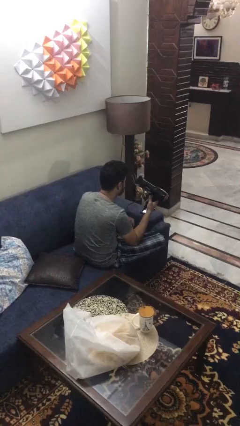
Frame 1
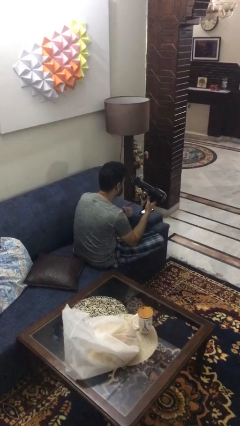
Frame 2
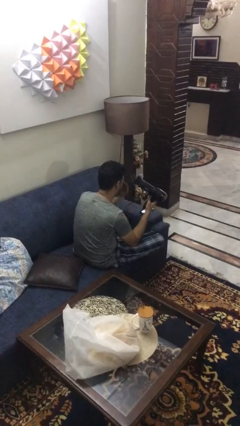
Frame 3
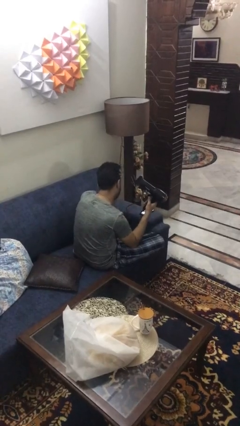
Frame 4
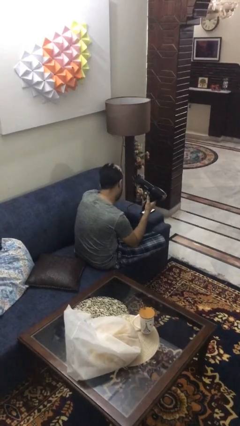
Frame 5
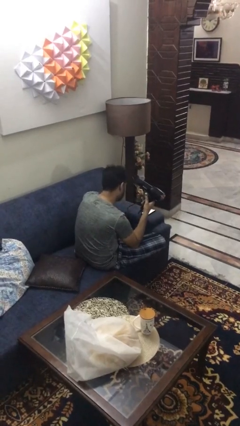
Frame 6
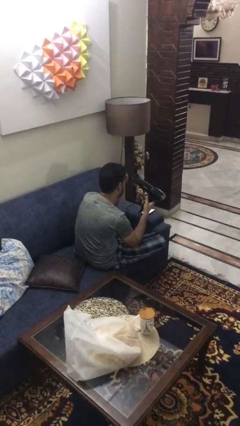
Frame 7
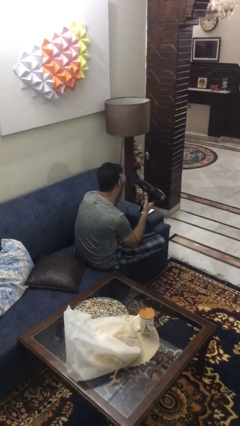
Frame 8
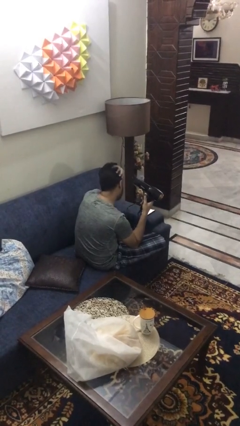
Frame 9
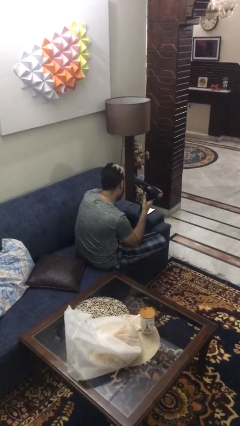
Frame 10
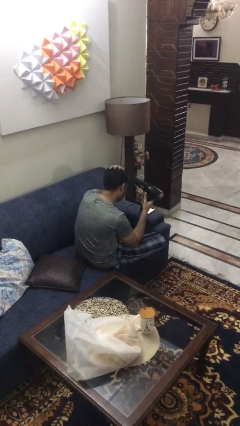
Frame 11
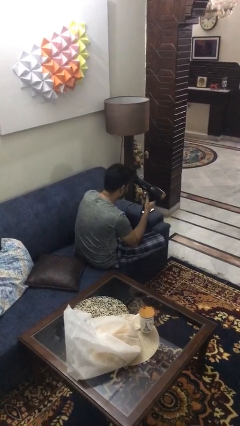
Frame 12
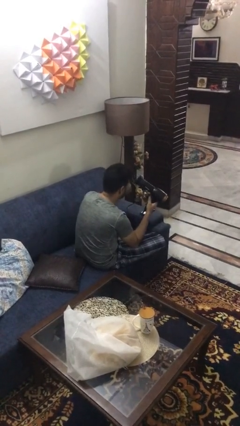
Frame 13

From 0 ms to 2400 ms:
person dries hair with hairdryer

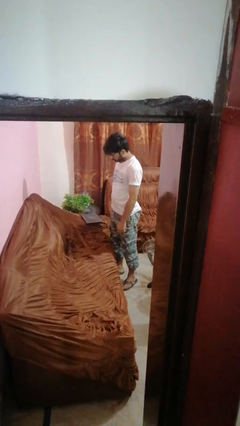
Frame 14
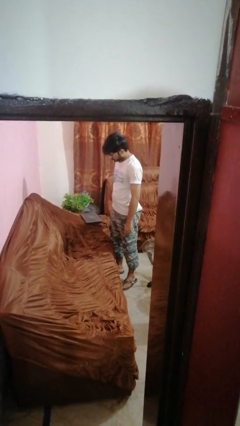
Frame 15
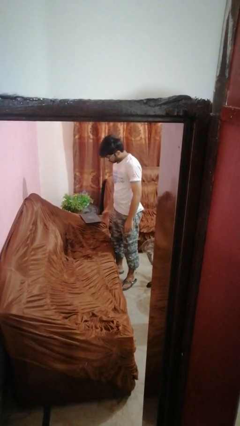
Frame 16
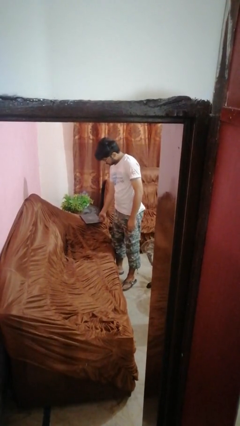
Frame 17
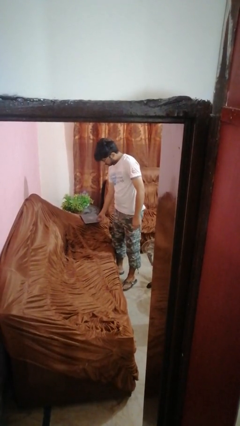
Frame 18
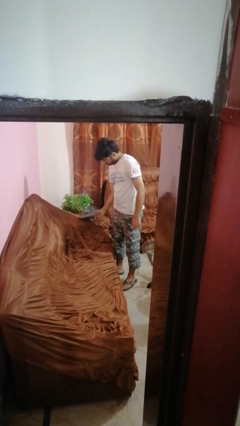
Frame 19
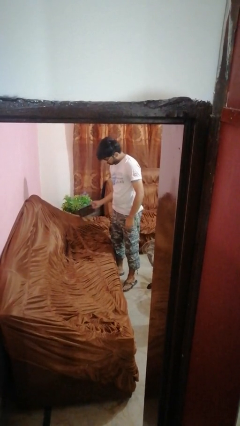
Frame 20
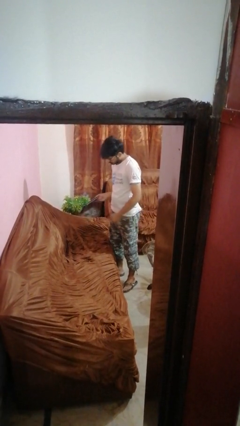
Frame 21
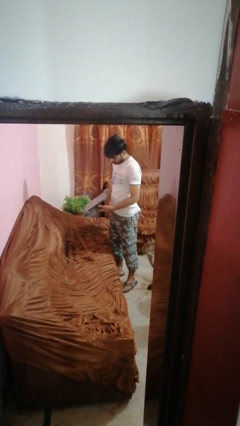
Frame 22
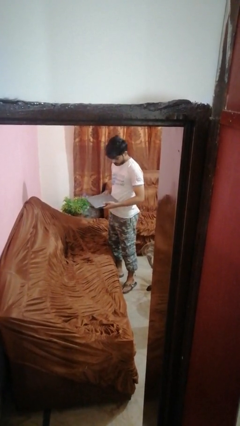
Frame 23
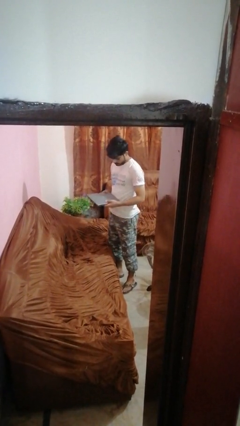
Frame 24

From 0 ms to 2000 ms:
person picks up object from couch

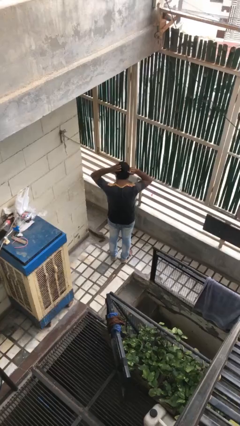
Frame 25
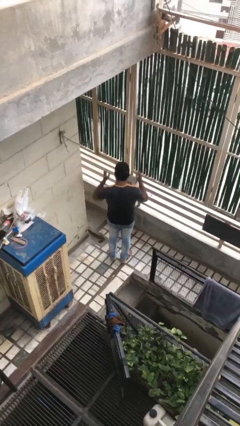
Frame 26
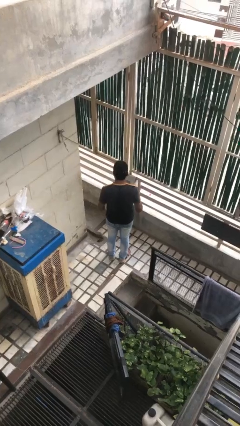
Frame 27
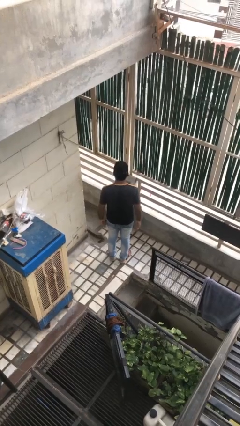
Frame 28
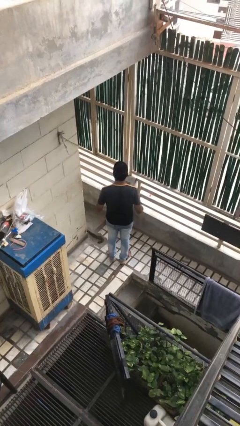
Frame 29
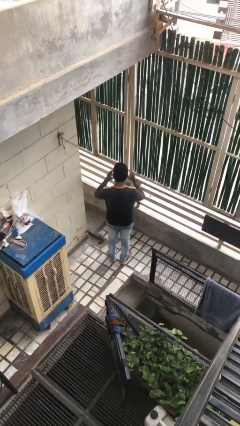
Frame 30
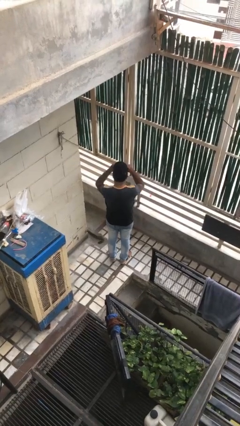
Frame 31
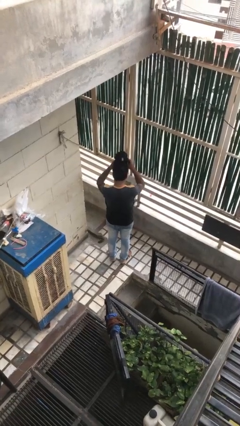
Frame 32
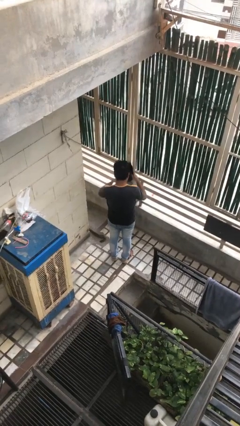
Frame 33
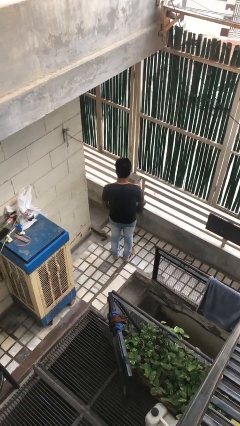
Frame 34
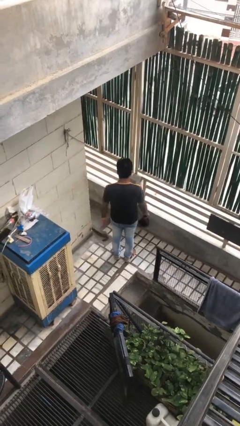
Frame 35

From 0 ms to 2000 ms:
person takes off hat

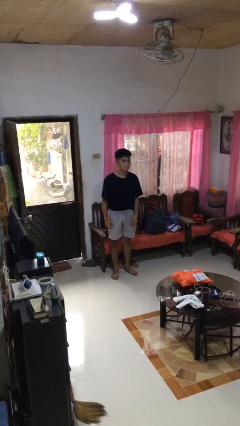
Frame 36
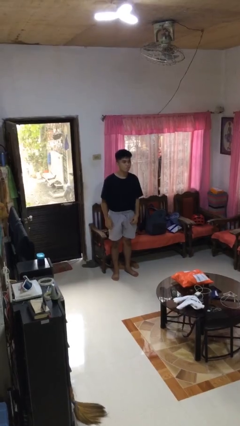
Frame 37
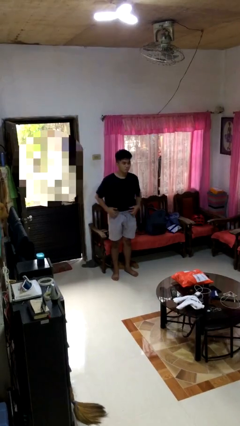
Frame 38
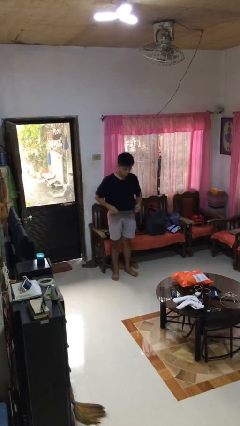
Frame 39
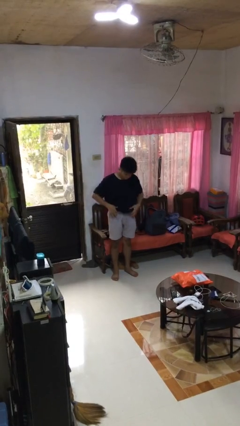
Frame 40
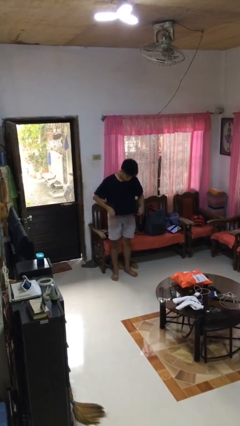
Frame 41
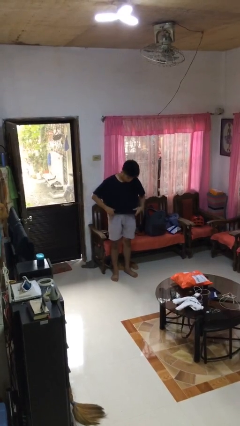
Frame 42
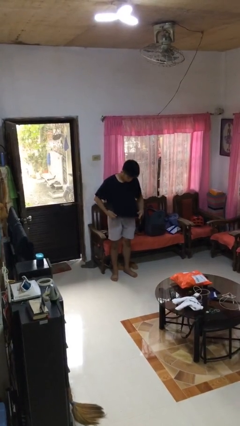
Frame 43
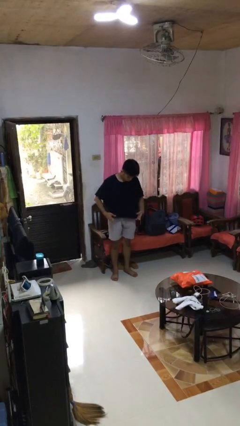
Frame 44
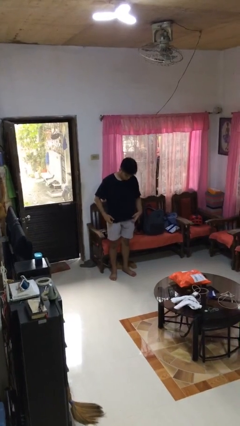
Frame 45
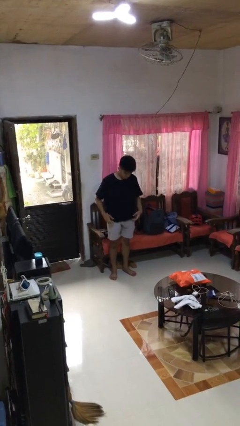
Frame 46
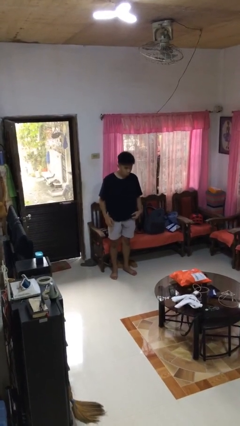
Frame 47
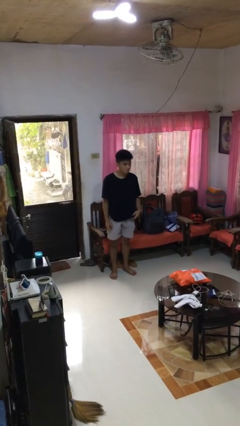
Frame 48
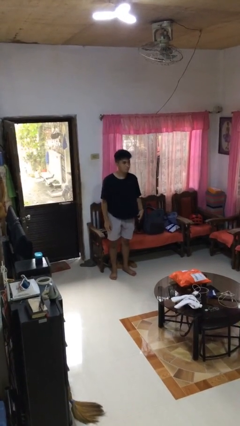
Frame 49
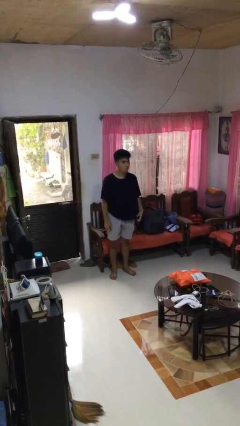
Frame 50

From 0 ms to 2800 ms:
person untucks shirt

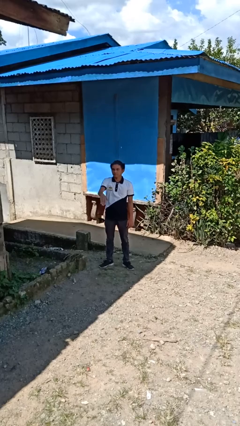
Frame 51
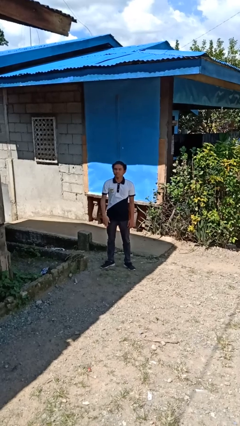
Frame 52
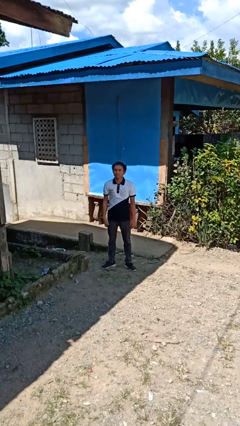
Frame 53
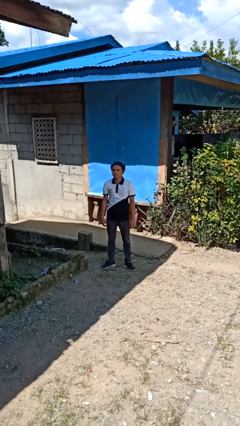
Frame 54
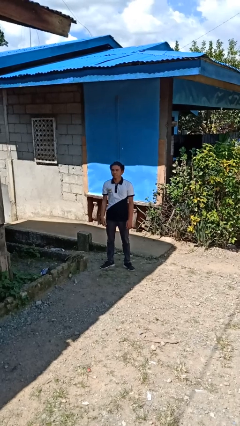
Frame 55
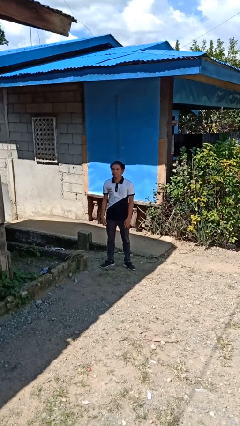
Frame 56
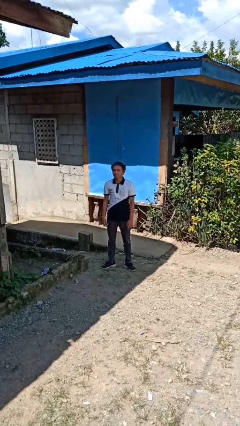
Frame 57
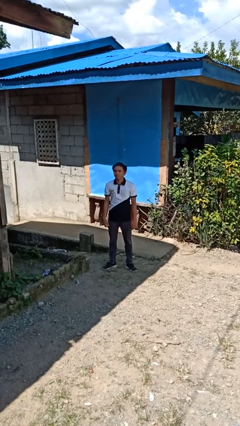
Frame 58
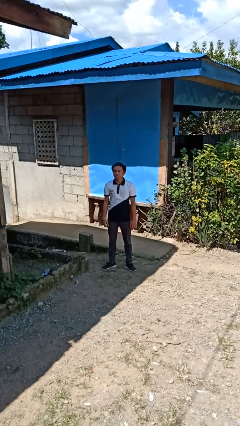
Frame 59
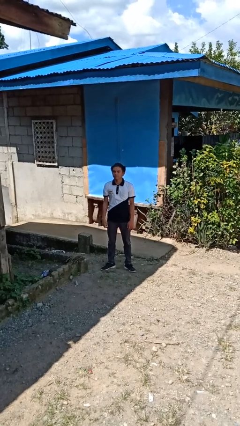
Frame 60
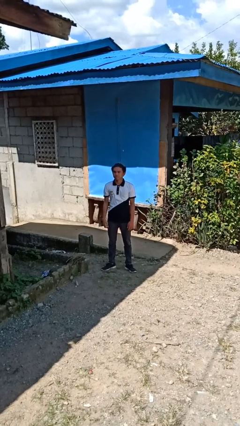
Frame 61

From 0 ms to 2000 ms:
person gestures swipe down

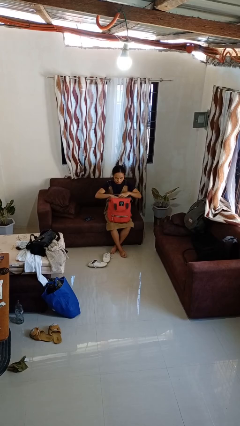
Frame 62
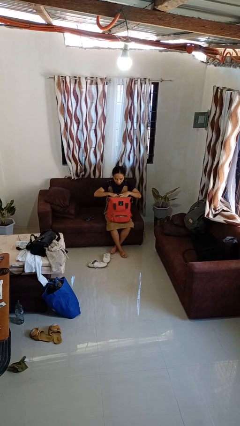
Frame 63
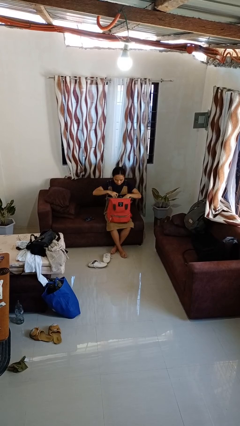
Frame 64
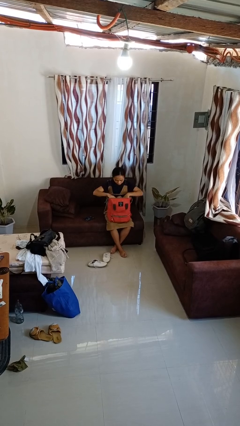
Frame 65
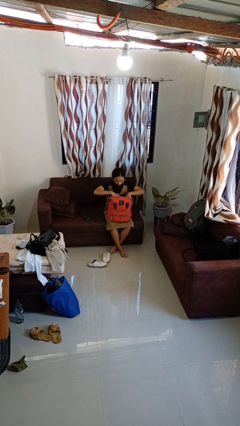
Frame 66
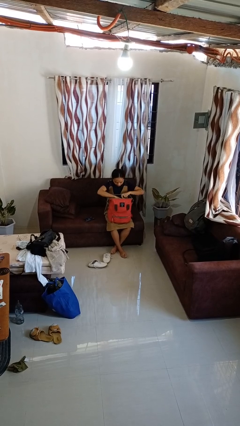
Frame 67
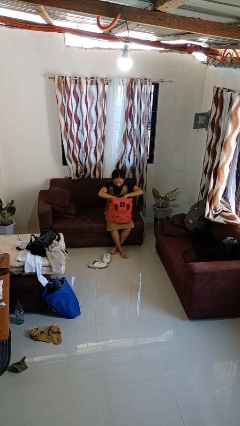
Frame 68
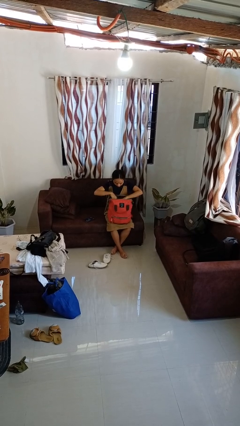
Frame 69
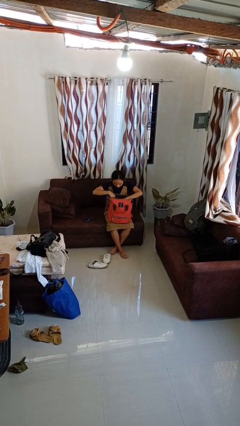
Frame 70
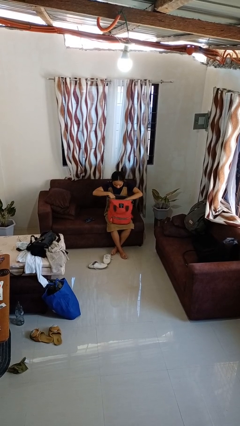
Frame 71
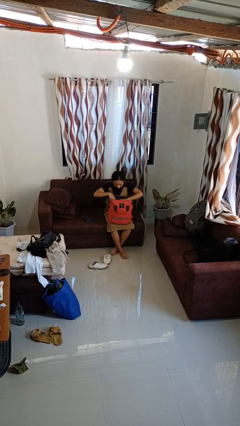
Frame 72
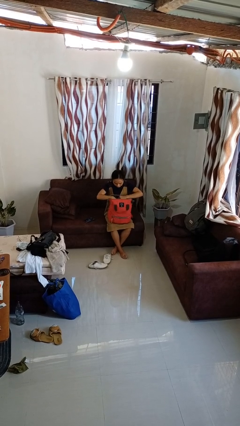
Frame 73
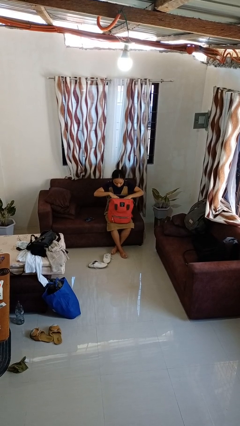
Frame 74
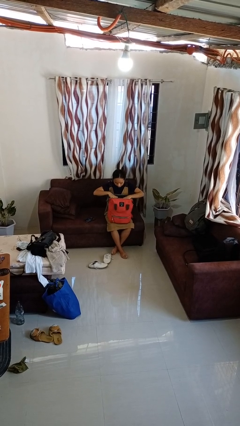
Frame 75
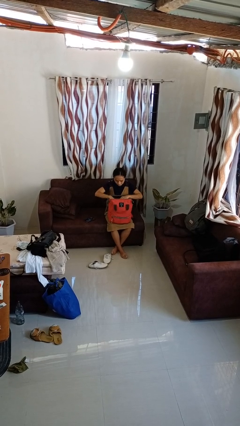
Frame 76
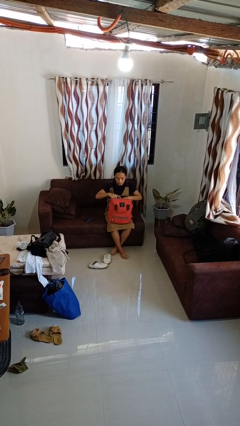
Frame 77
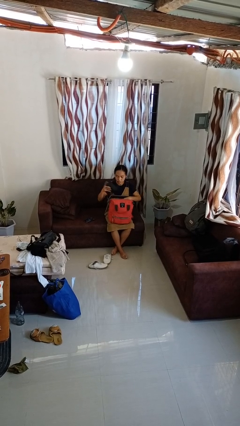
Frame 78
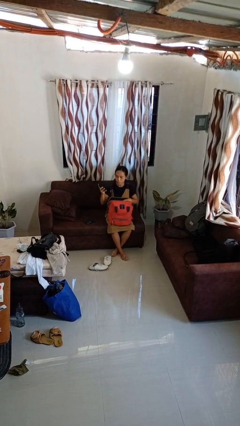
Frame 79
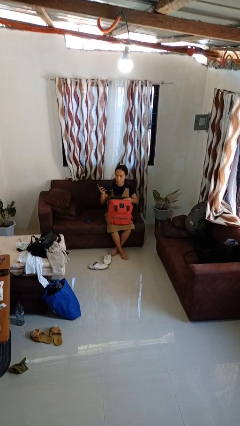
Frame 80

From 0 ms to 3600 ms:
person searches in backpack

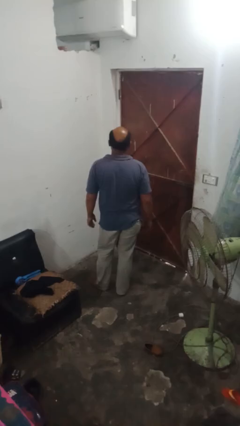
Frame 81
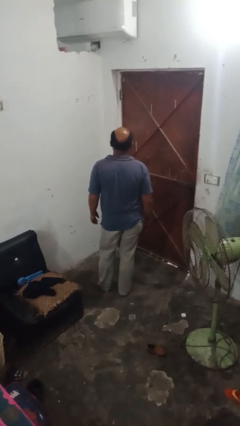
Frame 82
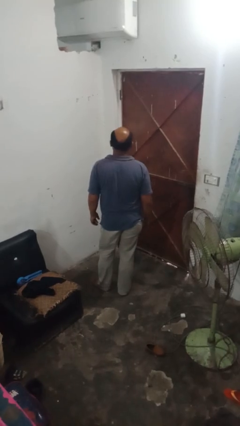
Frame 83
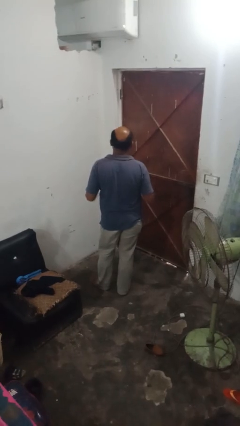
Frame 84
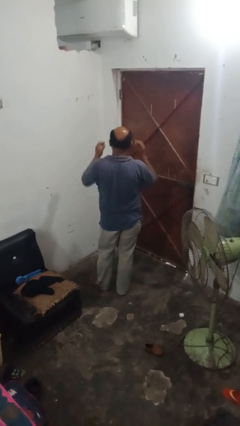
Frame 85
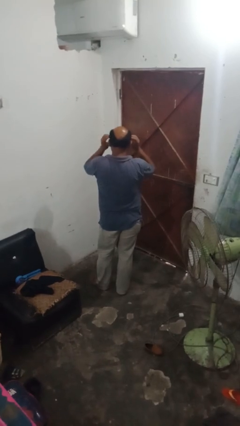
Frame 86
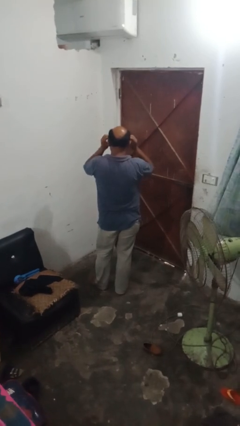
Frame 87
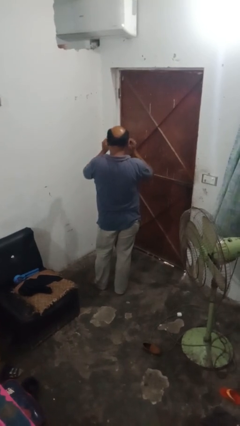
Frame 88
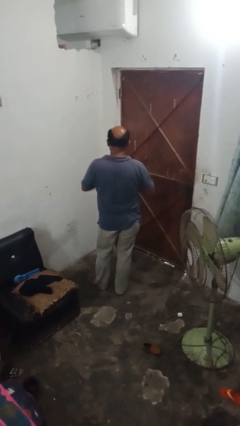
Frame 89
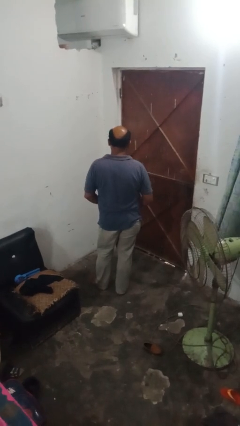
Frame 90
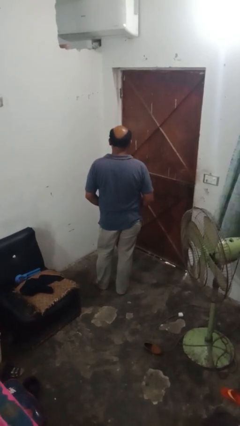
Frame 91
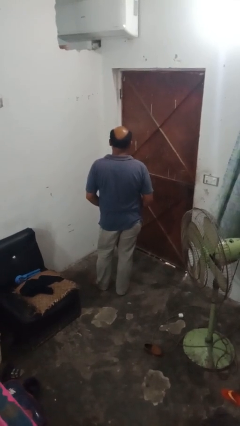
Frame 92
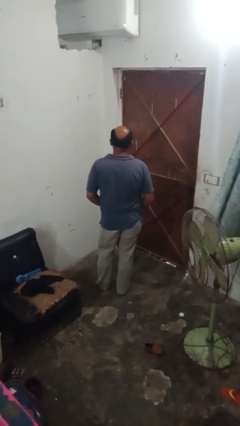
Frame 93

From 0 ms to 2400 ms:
person takes off sunglasses
